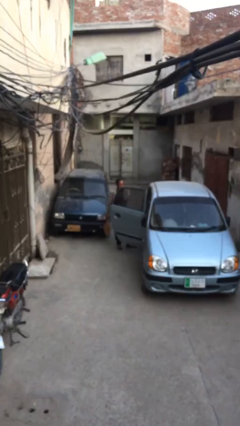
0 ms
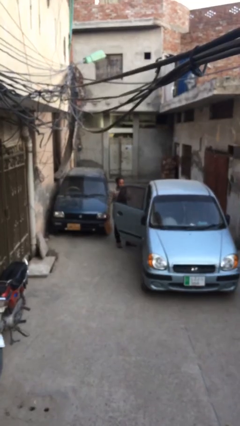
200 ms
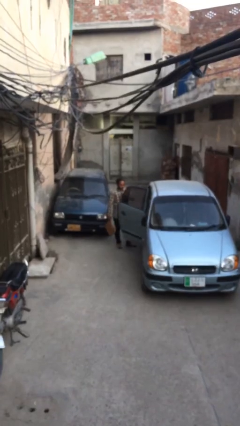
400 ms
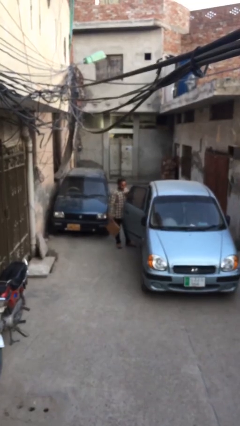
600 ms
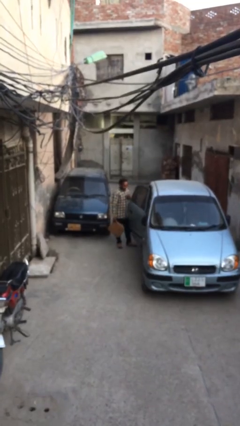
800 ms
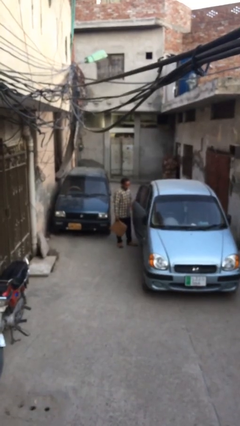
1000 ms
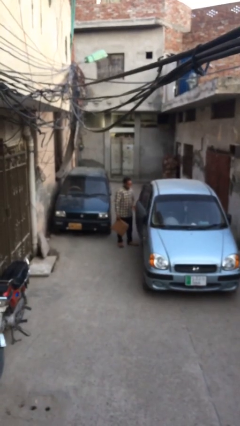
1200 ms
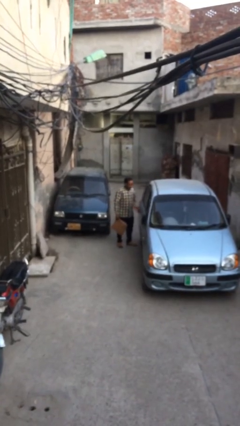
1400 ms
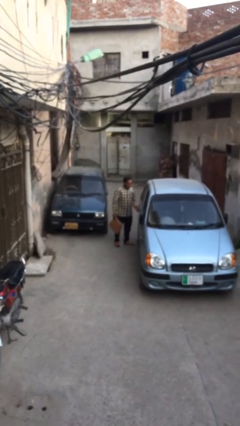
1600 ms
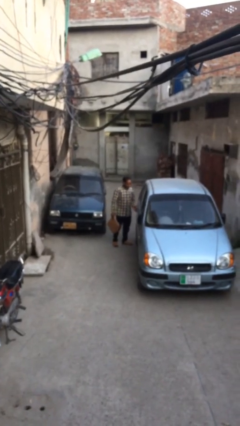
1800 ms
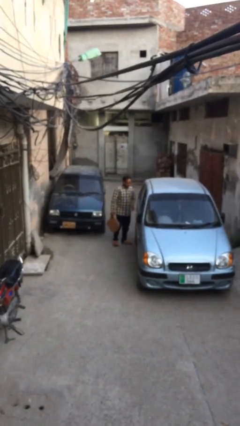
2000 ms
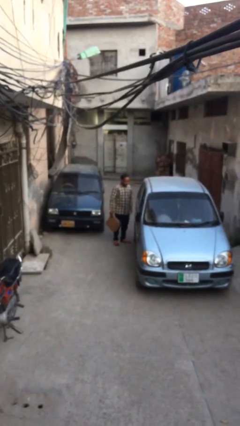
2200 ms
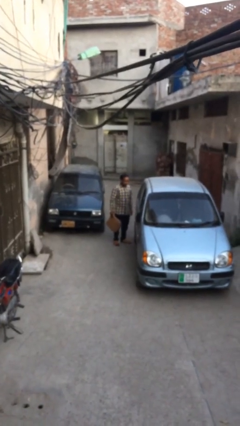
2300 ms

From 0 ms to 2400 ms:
person closes car door

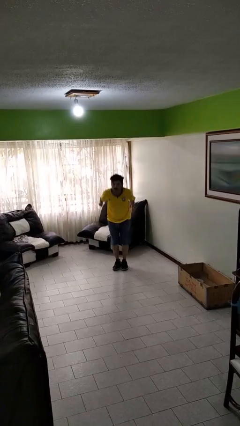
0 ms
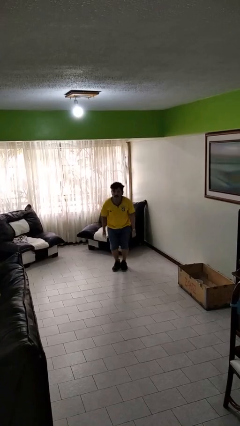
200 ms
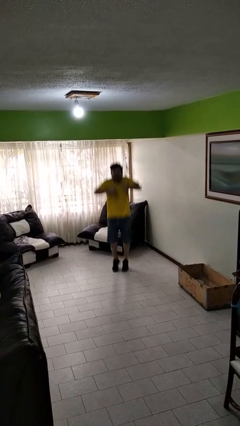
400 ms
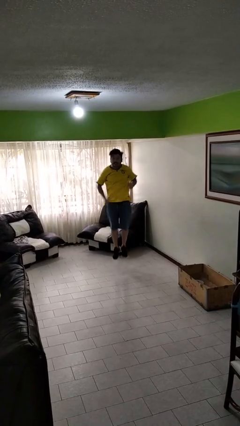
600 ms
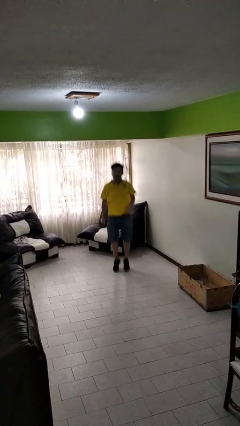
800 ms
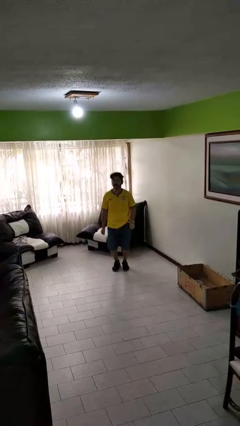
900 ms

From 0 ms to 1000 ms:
person jumps

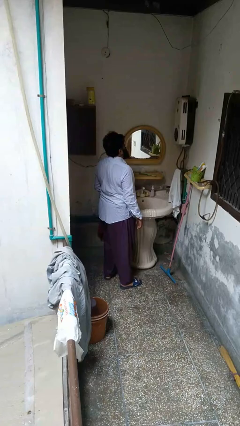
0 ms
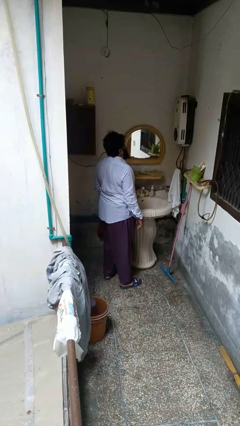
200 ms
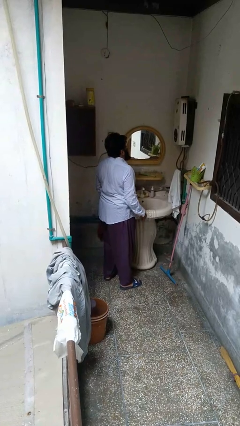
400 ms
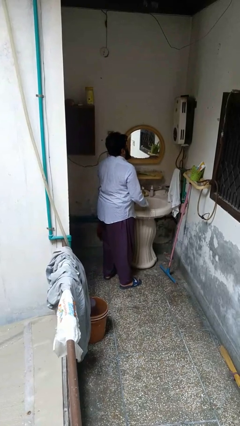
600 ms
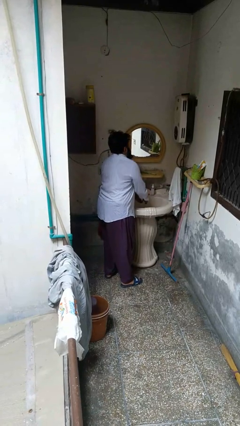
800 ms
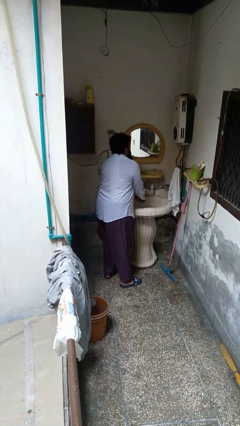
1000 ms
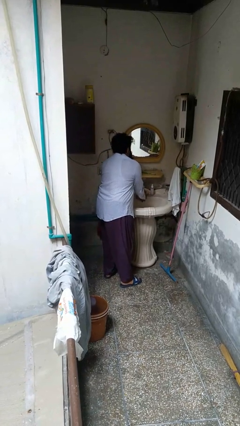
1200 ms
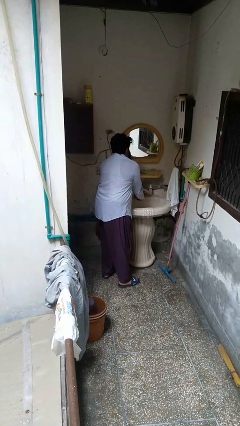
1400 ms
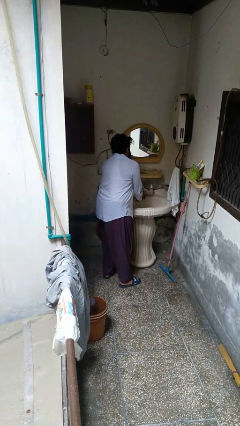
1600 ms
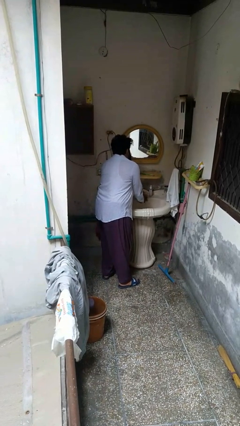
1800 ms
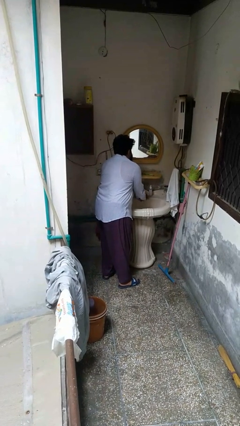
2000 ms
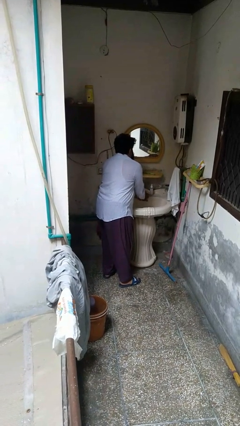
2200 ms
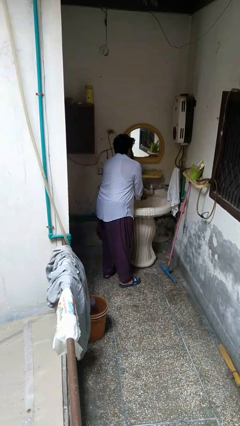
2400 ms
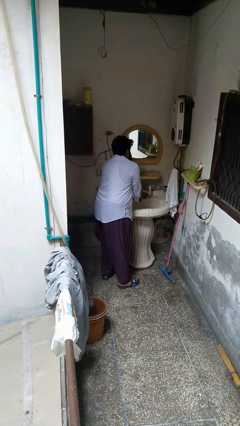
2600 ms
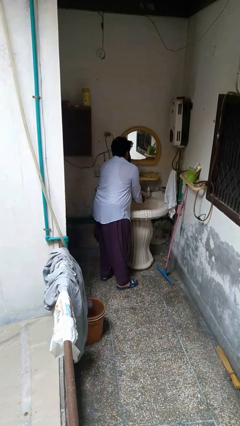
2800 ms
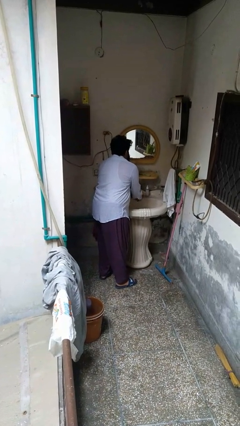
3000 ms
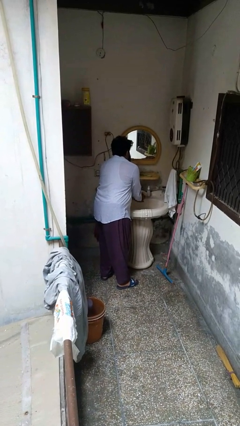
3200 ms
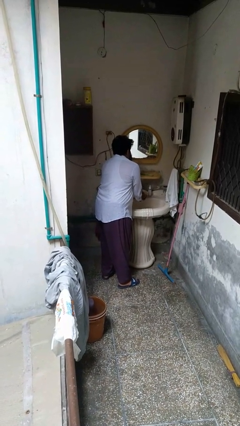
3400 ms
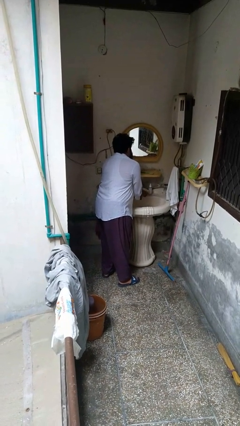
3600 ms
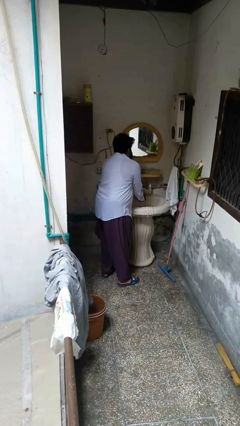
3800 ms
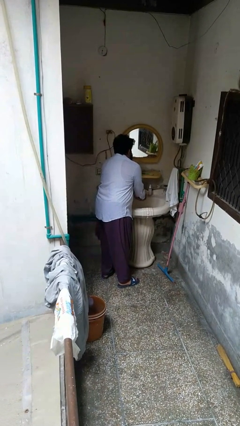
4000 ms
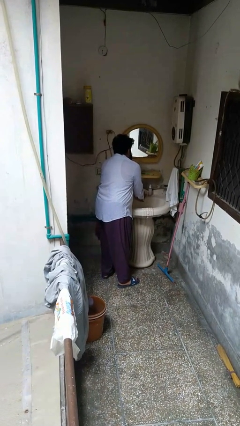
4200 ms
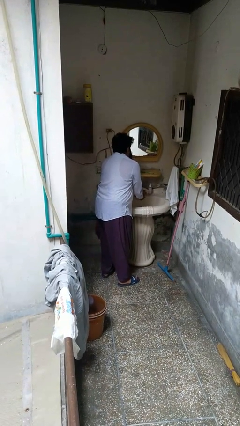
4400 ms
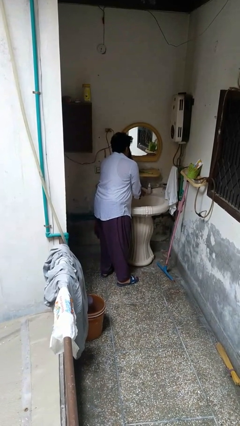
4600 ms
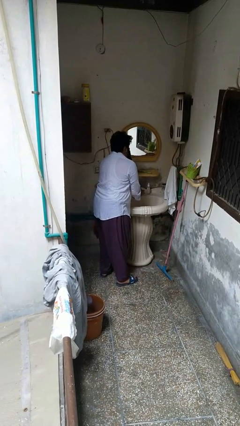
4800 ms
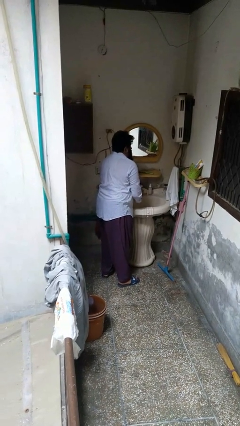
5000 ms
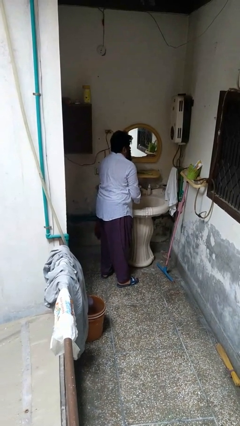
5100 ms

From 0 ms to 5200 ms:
person washes hands

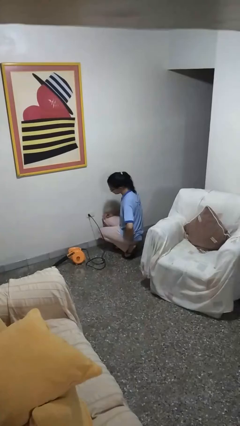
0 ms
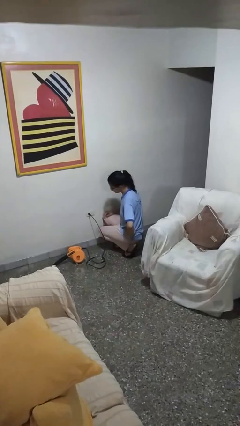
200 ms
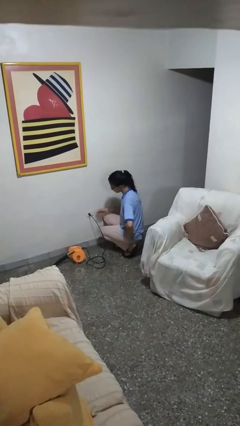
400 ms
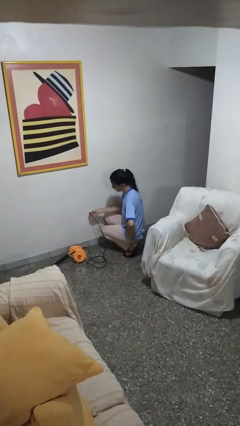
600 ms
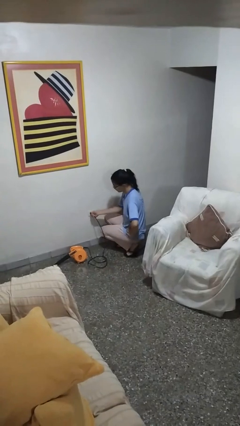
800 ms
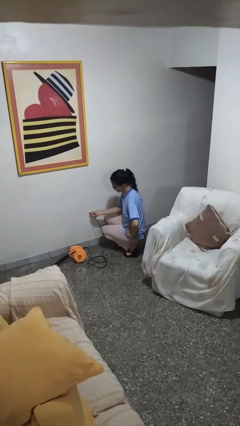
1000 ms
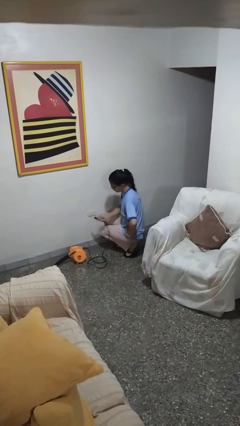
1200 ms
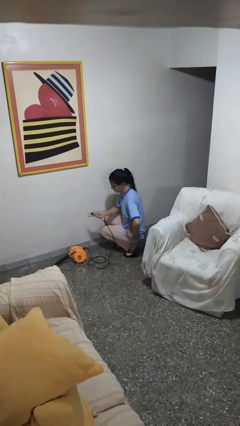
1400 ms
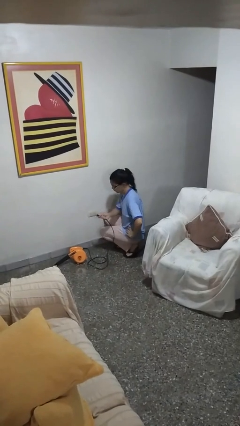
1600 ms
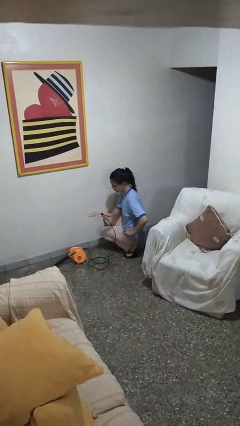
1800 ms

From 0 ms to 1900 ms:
person unplugs from electrical socket

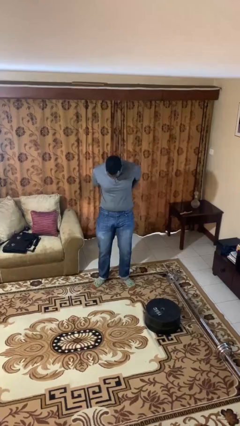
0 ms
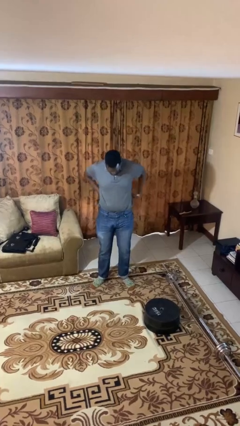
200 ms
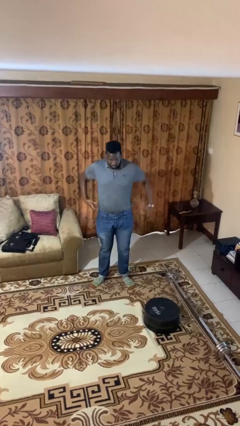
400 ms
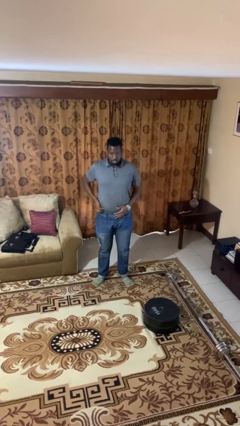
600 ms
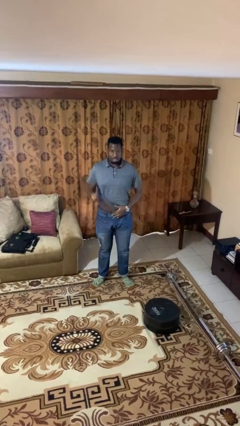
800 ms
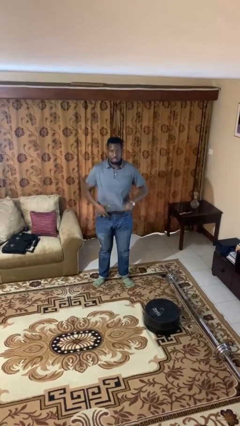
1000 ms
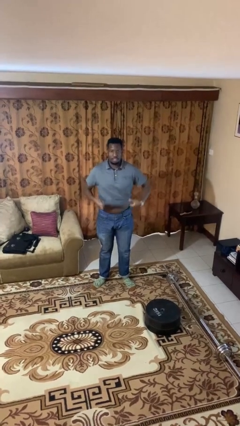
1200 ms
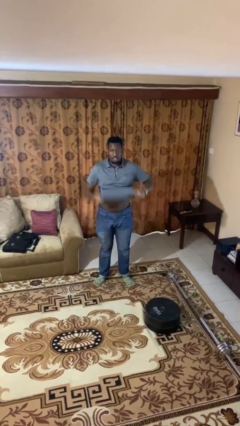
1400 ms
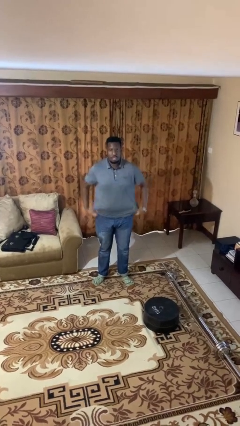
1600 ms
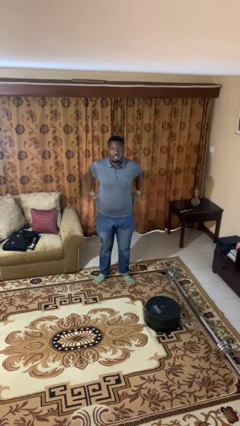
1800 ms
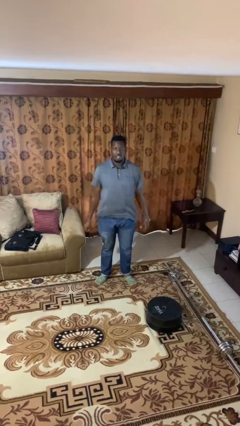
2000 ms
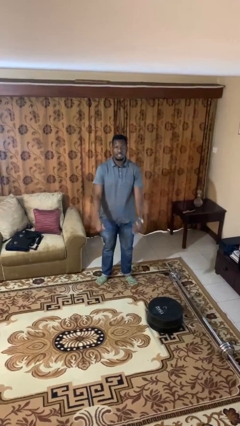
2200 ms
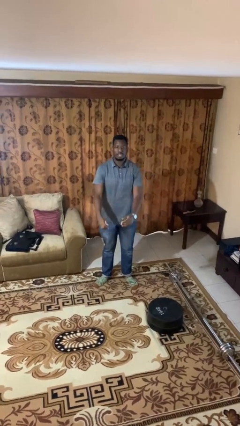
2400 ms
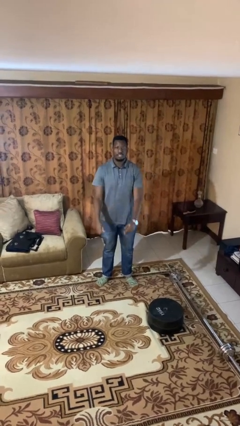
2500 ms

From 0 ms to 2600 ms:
person untucks shirt

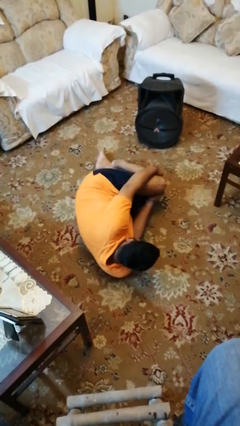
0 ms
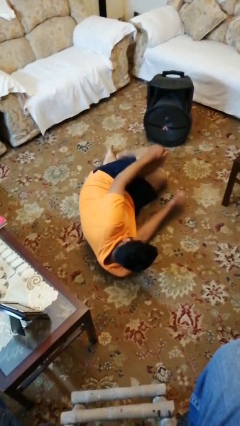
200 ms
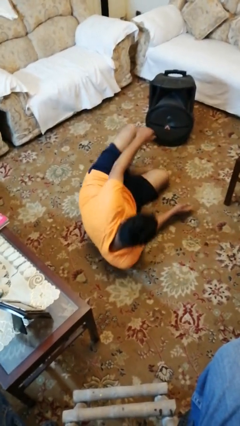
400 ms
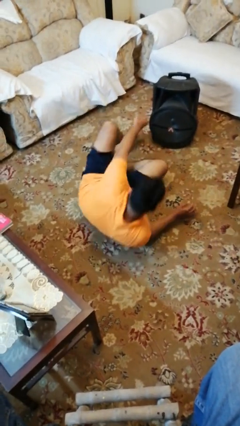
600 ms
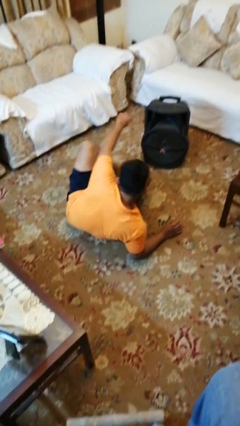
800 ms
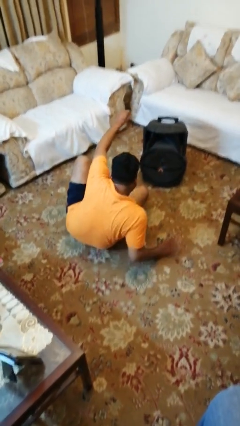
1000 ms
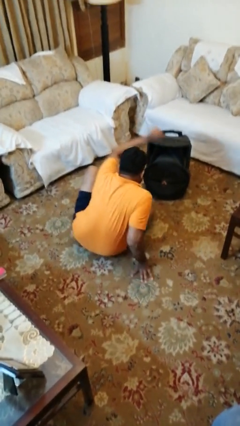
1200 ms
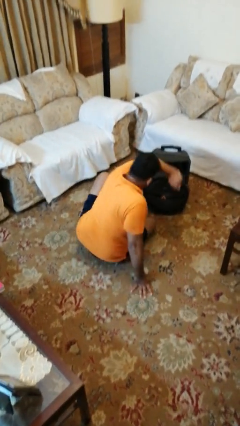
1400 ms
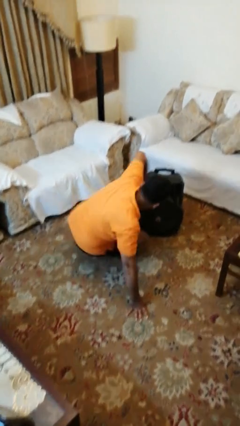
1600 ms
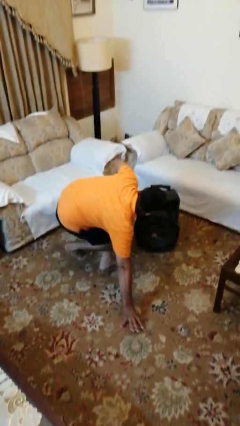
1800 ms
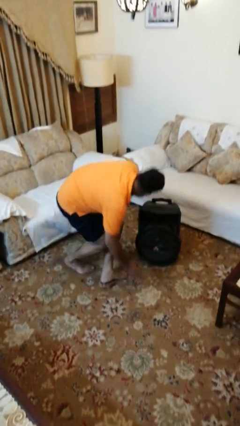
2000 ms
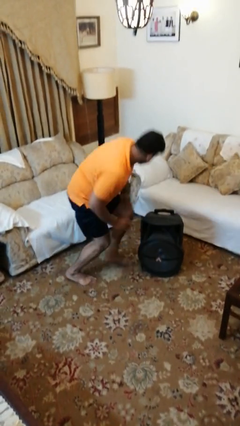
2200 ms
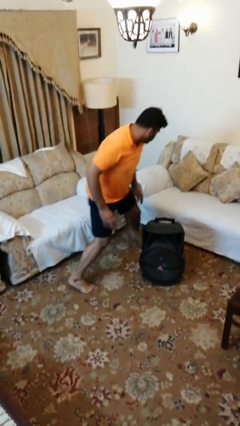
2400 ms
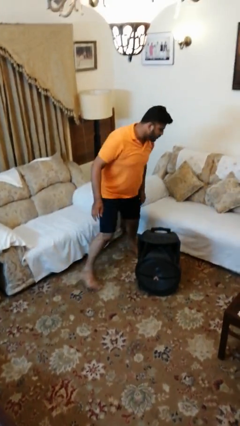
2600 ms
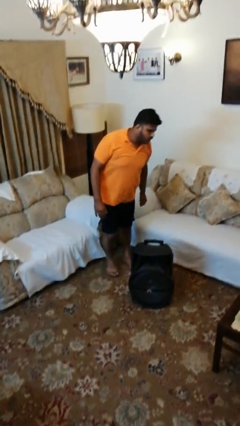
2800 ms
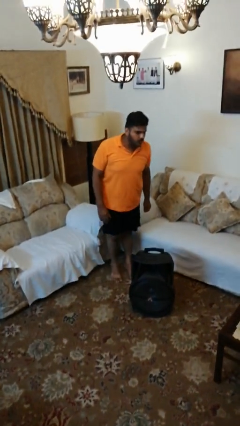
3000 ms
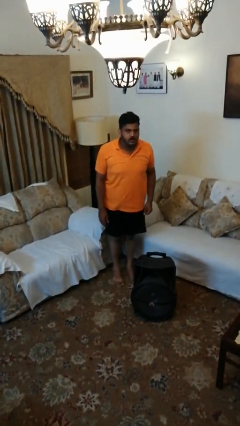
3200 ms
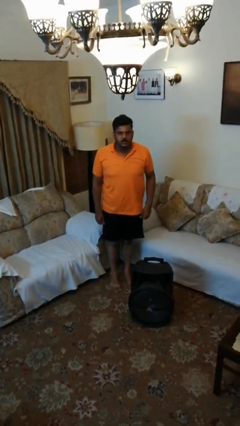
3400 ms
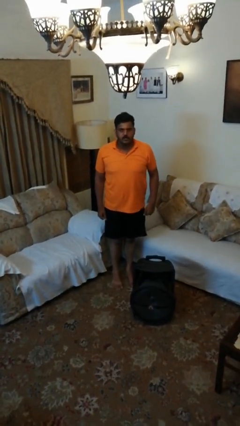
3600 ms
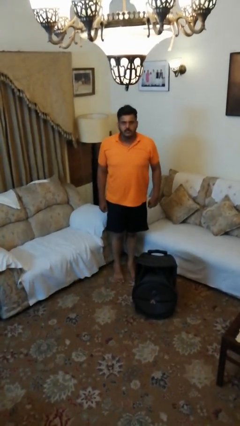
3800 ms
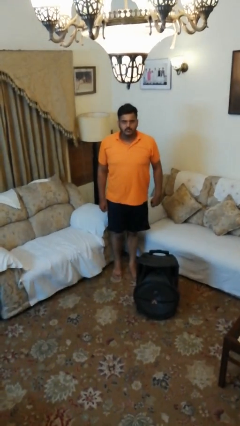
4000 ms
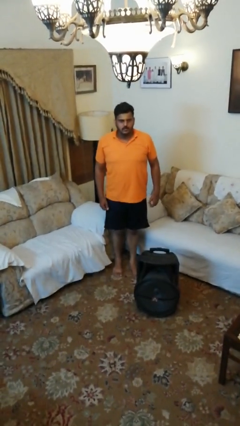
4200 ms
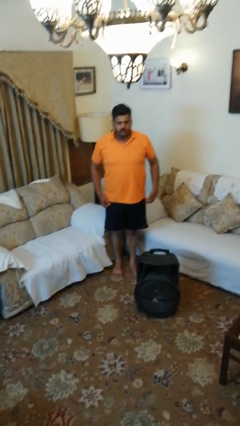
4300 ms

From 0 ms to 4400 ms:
person stands up from floor

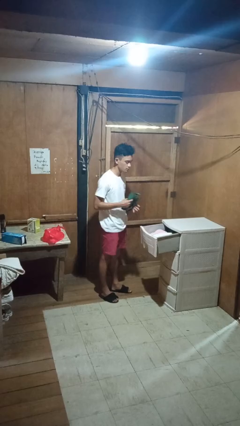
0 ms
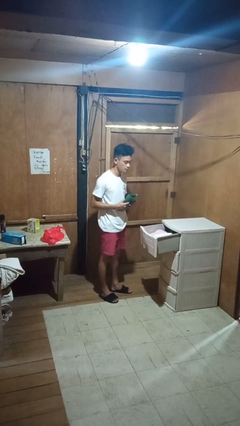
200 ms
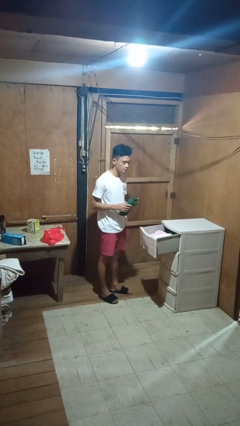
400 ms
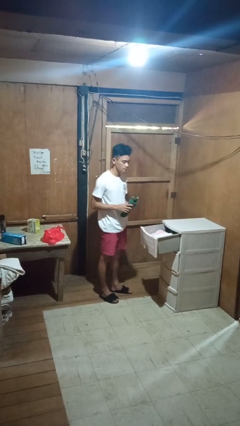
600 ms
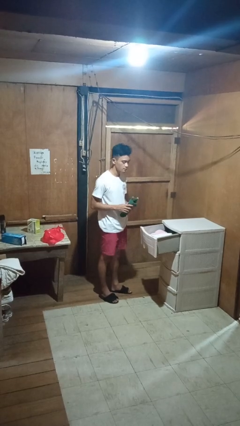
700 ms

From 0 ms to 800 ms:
person takes clothes from dresser
